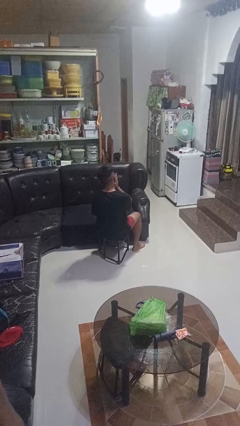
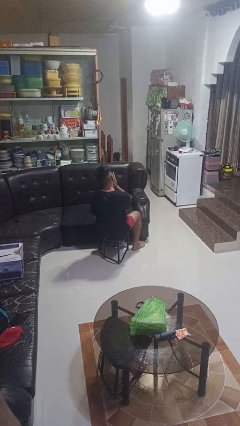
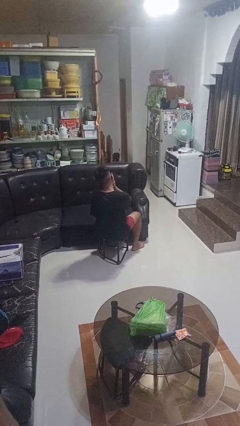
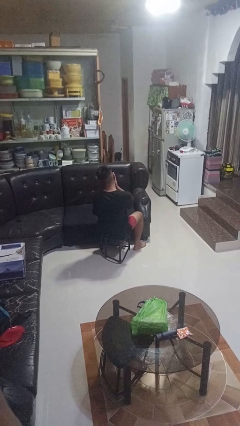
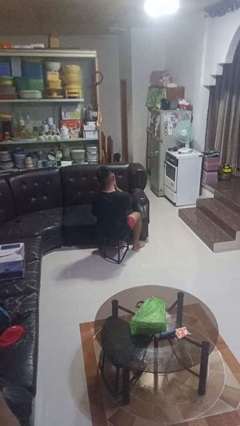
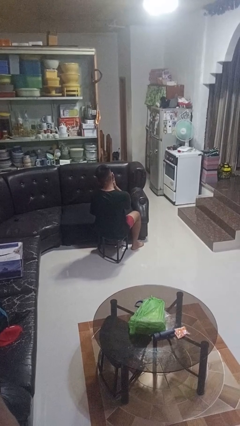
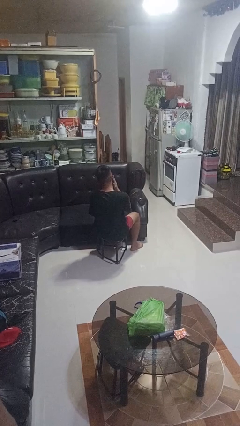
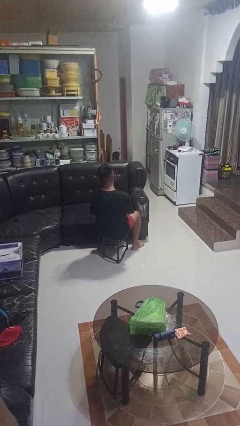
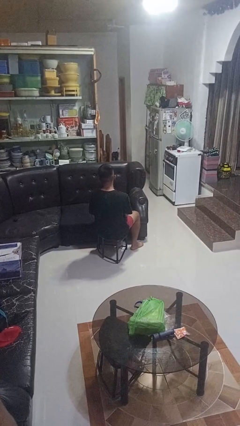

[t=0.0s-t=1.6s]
person swats bug

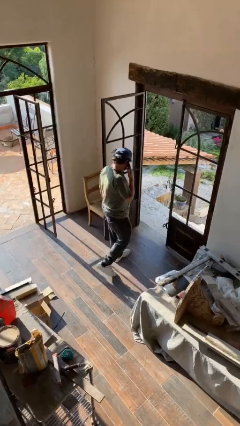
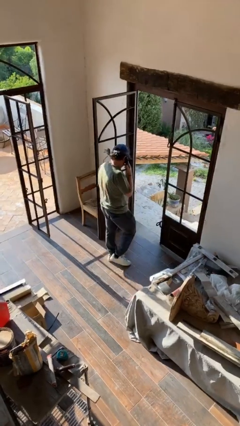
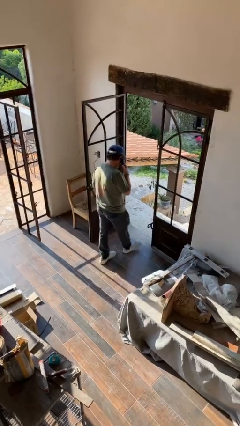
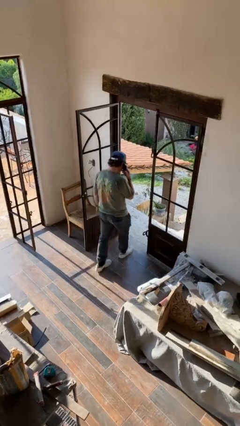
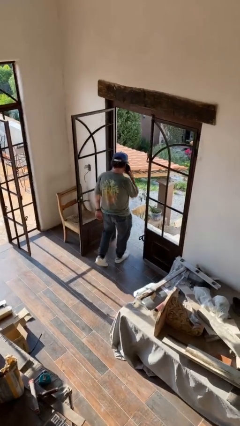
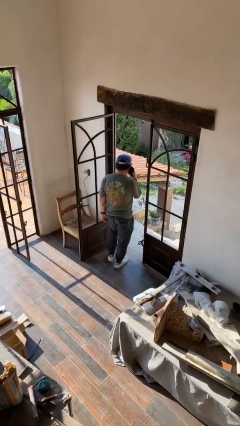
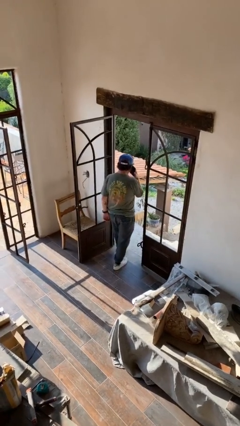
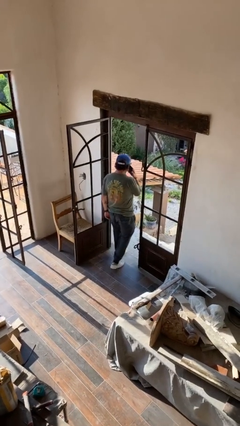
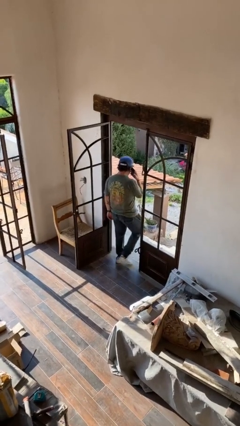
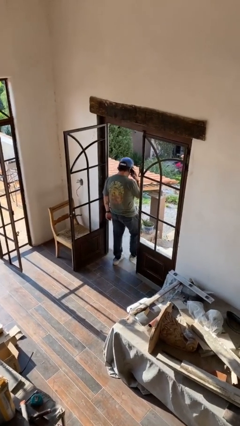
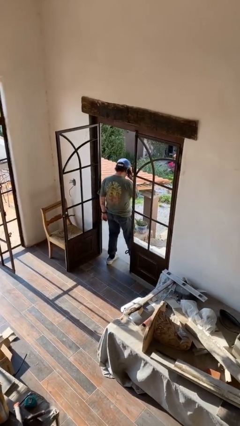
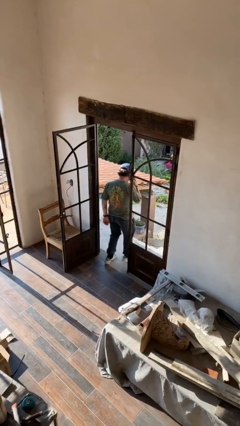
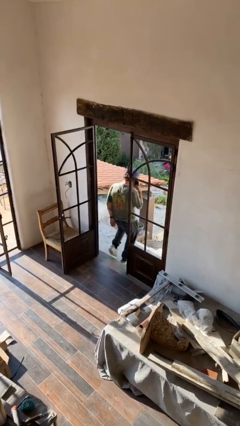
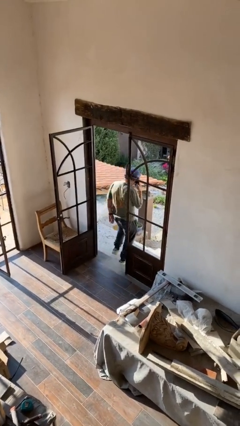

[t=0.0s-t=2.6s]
person exits scene through structure

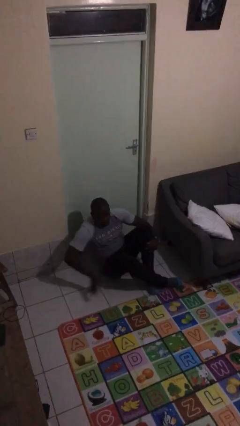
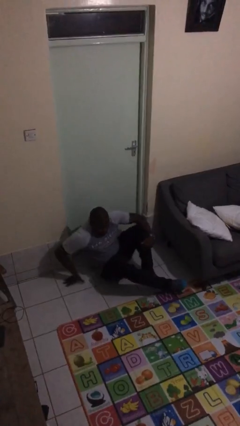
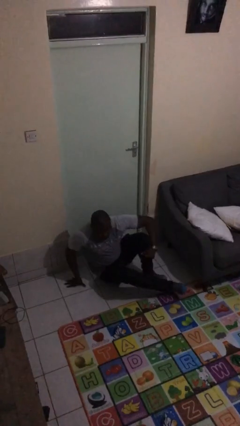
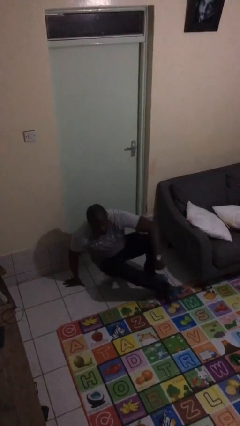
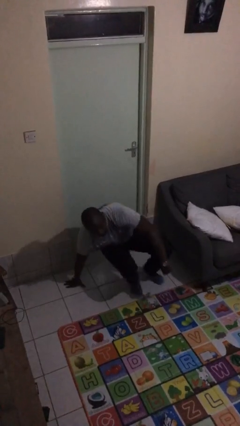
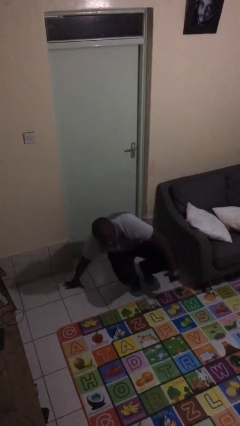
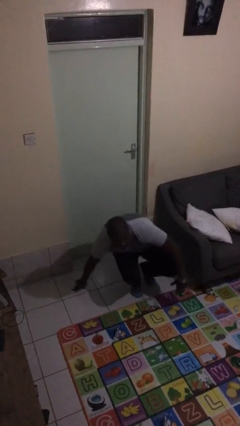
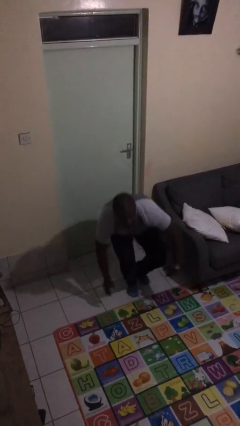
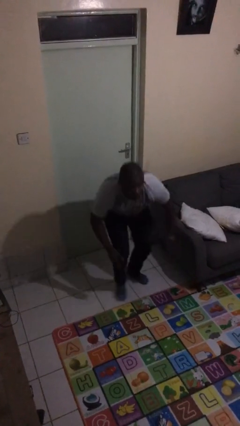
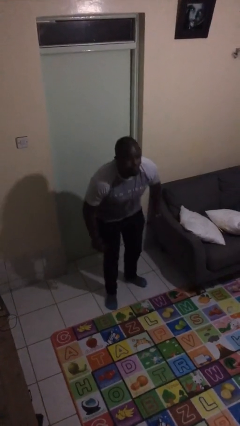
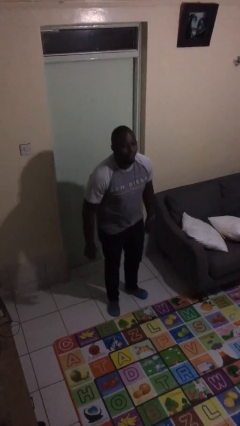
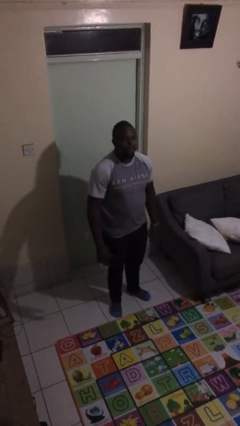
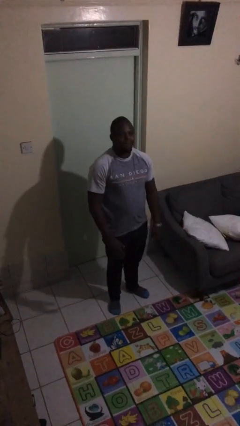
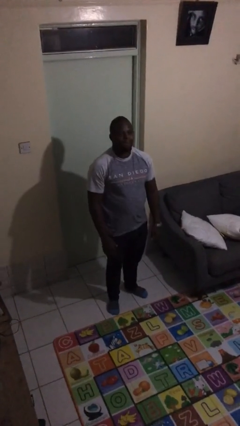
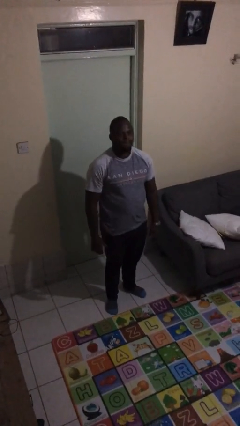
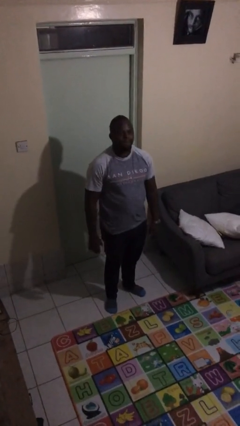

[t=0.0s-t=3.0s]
person stands up from floor

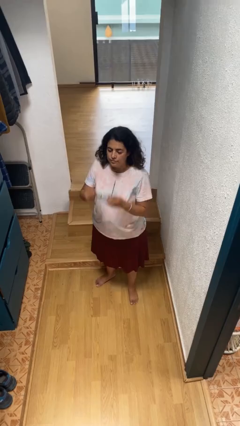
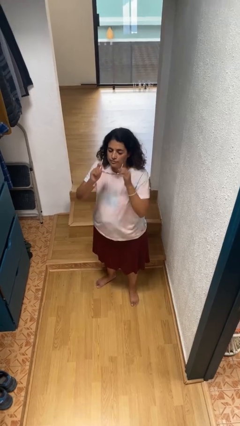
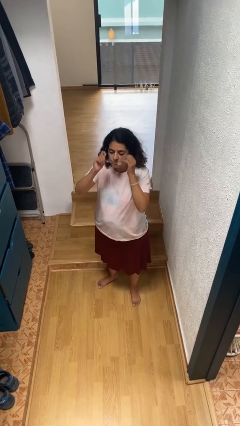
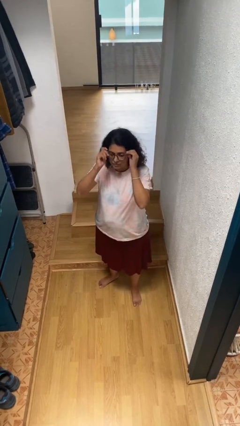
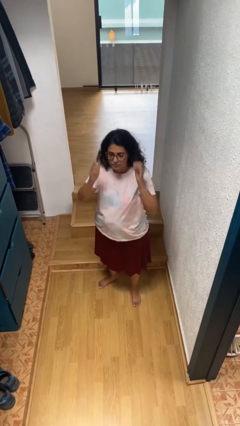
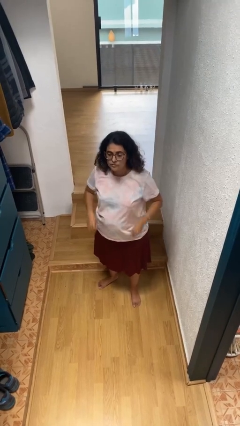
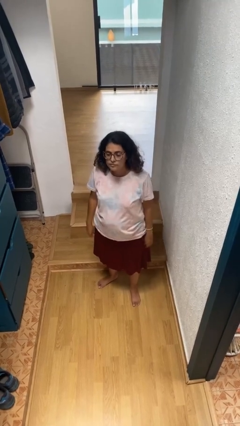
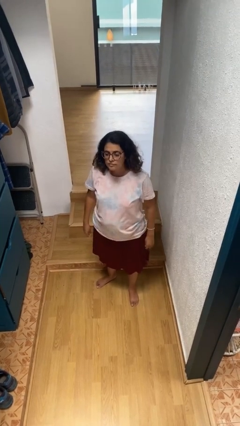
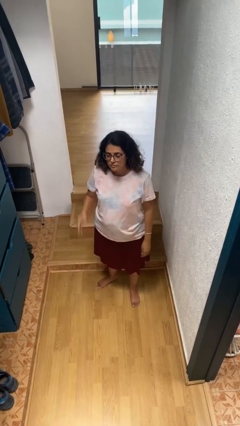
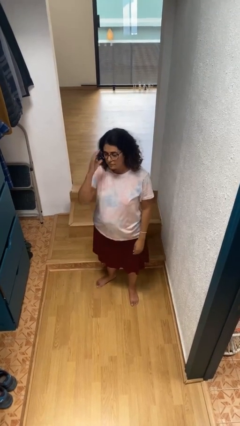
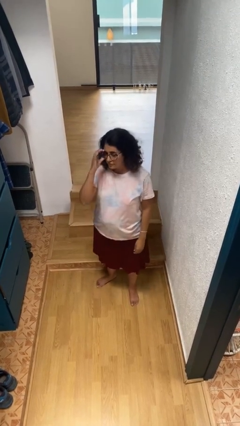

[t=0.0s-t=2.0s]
person puts on glasses

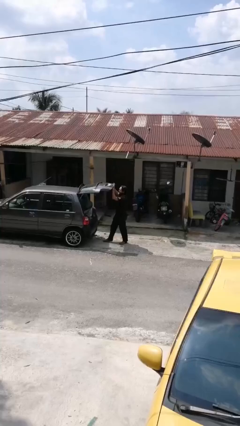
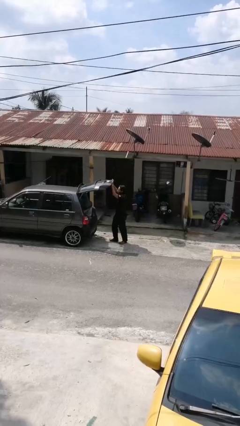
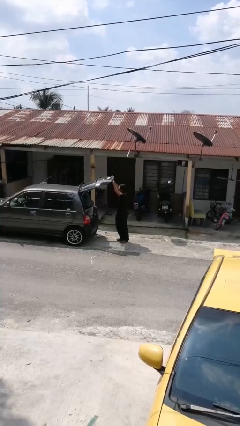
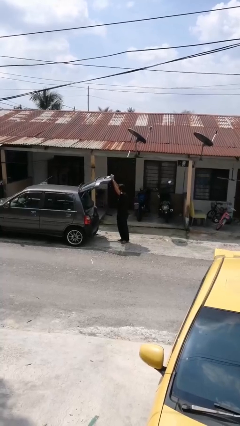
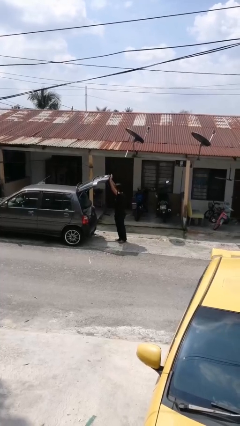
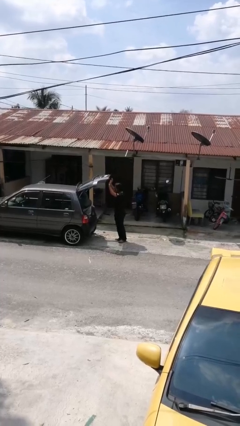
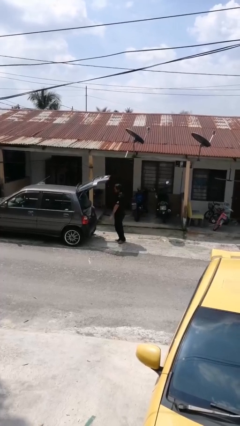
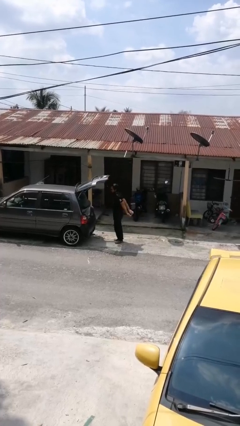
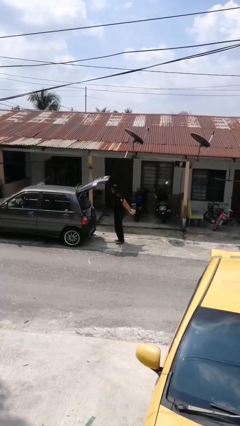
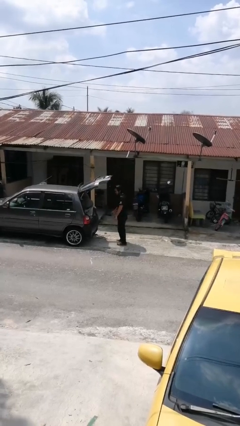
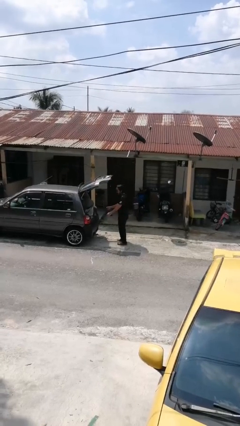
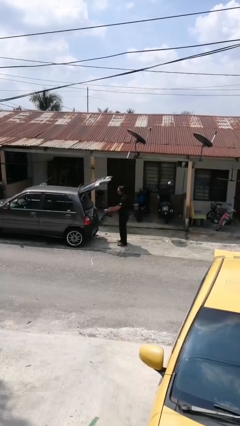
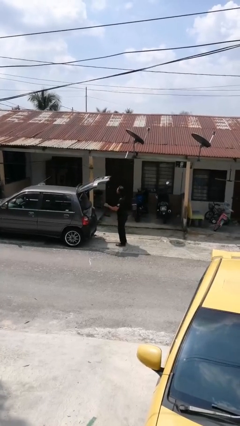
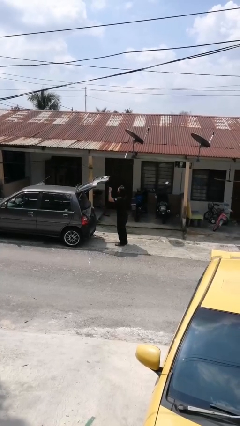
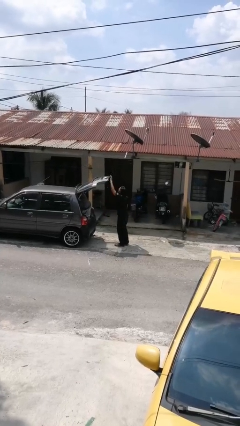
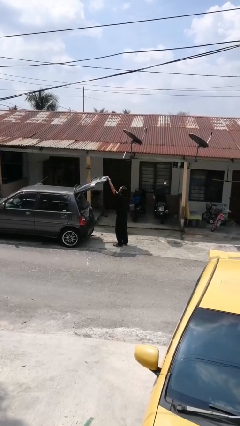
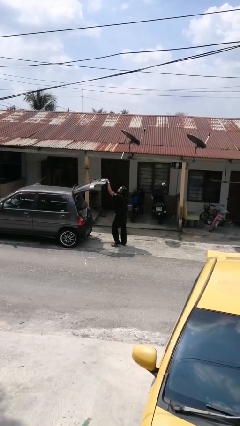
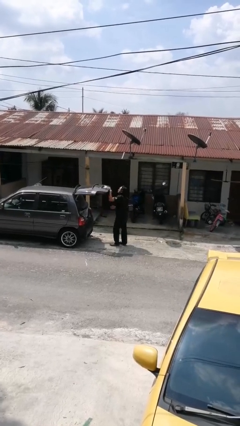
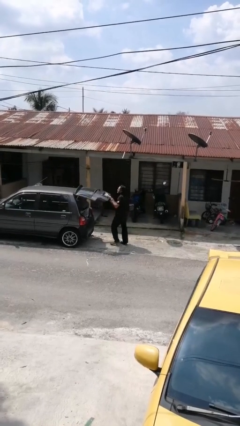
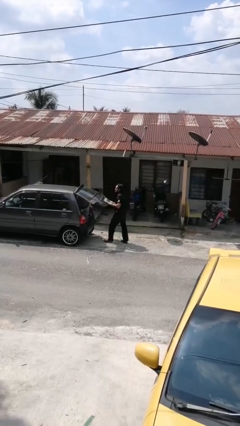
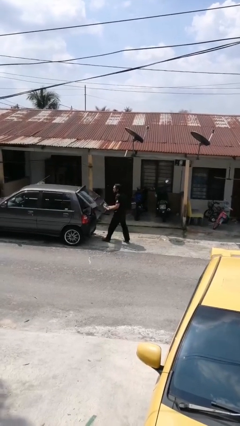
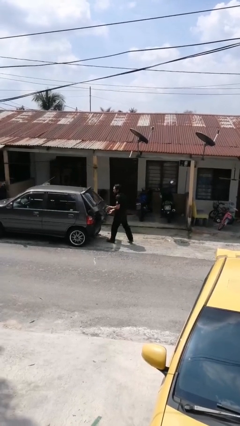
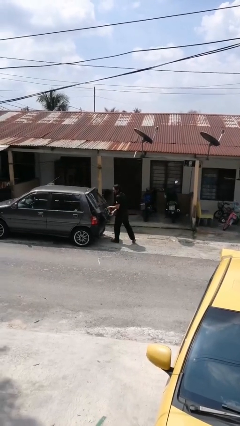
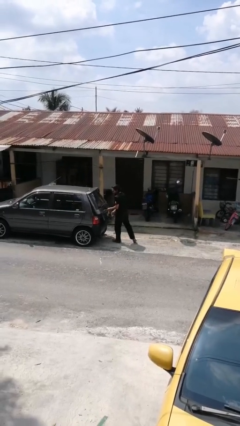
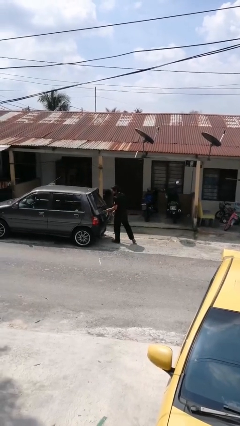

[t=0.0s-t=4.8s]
person closes car trunk

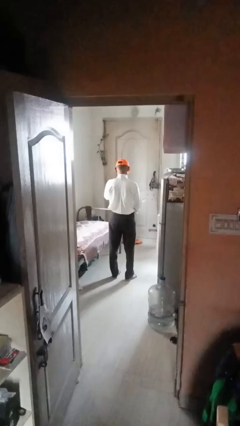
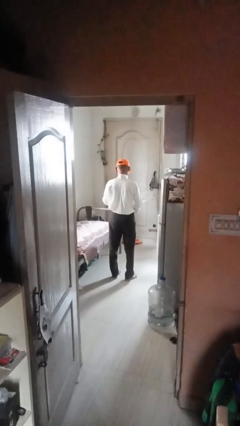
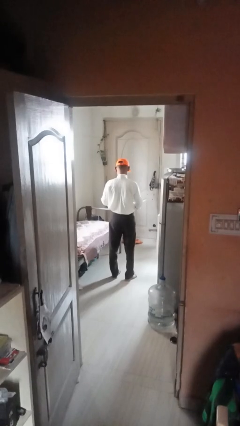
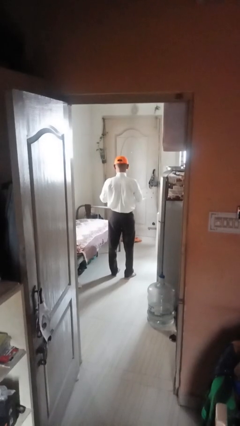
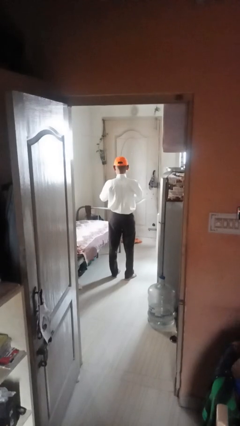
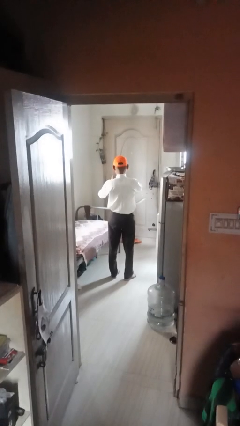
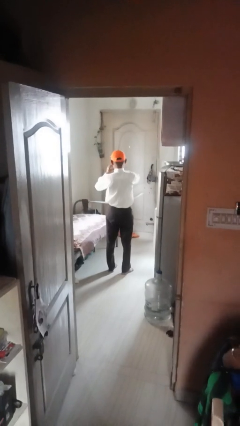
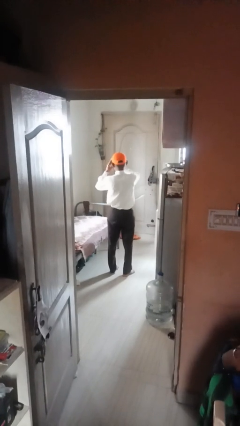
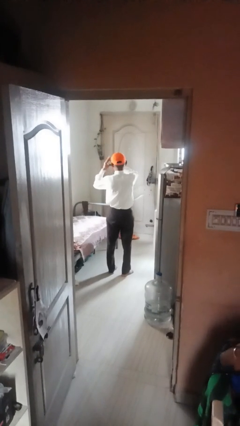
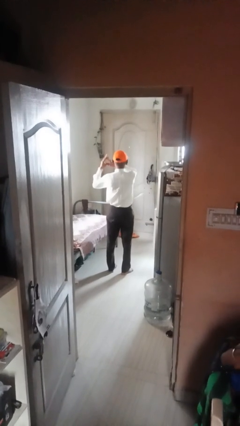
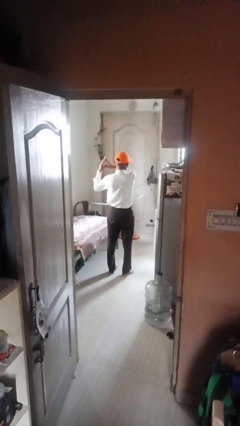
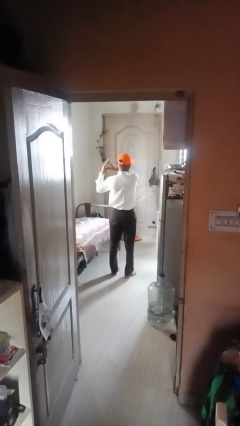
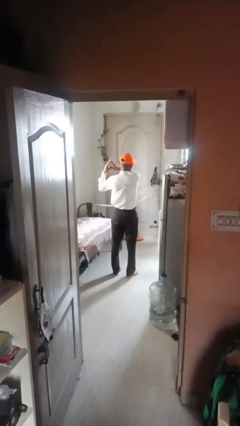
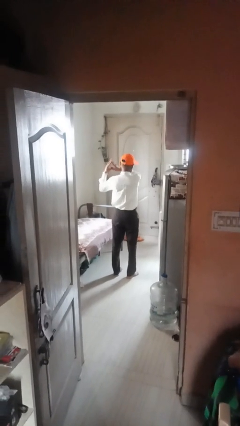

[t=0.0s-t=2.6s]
person gestures heart

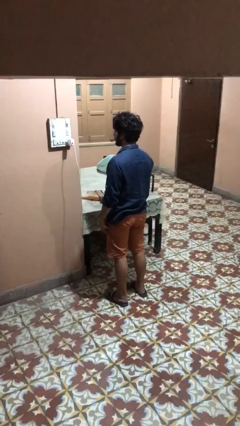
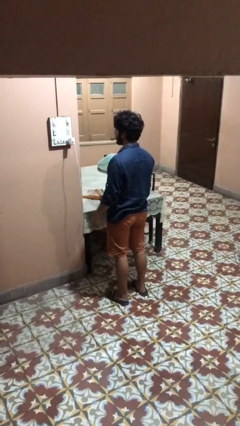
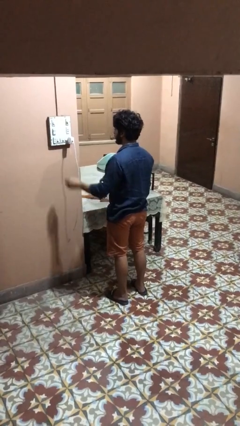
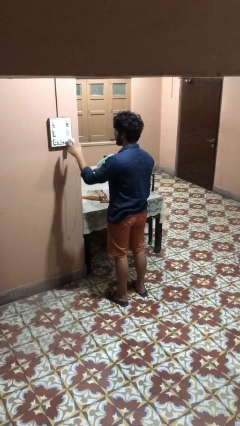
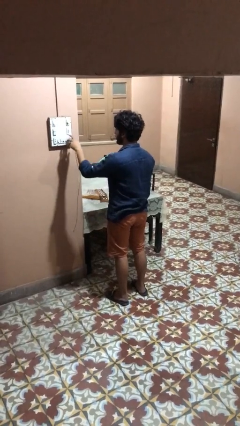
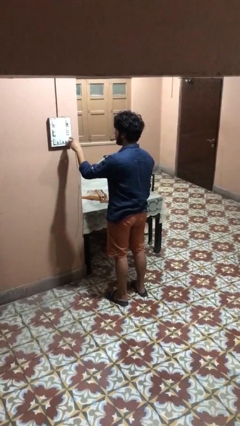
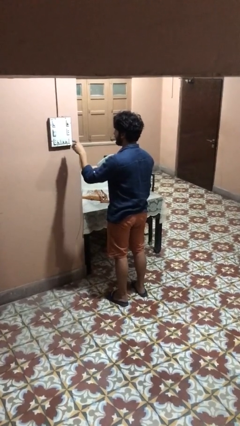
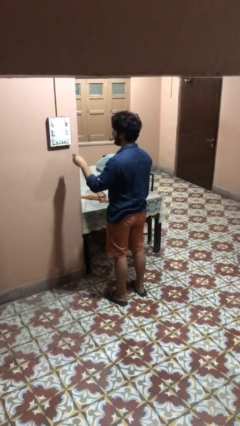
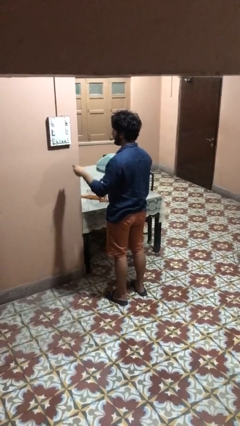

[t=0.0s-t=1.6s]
person unplugs from electrical socket
